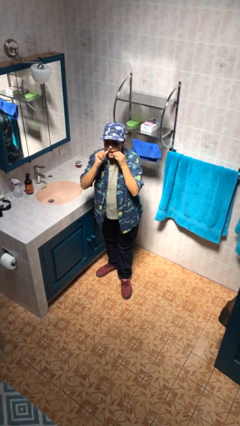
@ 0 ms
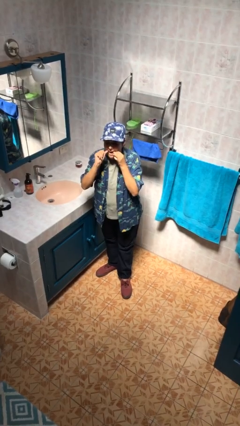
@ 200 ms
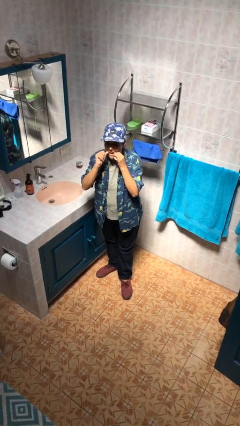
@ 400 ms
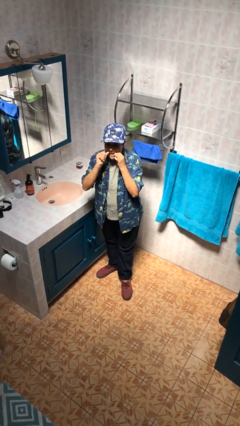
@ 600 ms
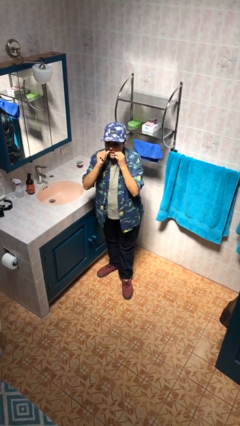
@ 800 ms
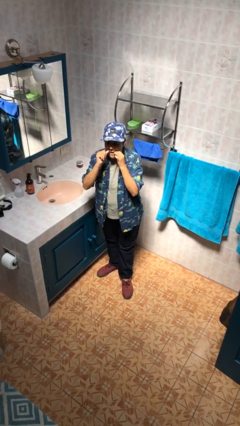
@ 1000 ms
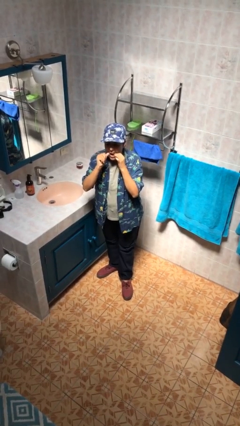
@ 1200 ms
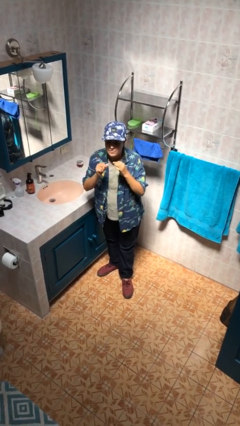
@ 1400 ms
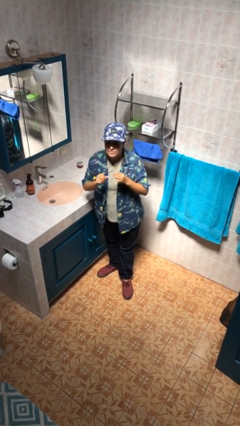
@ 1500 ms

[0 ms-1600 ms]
person flosses

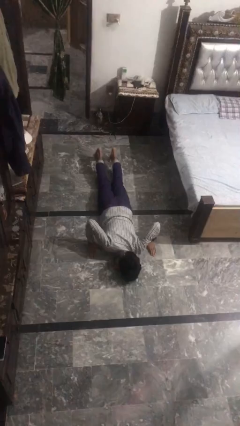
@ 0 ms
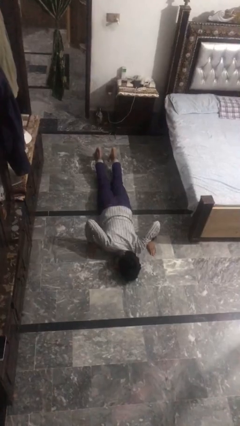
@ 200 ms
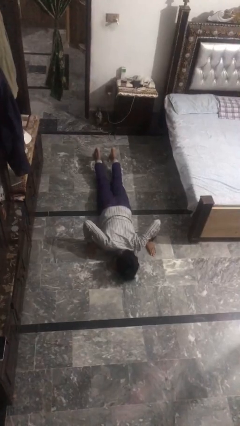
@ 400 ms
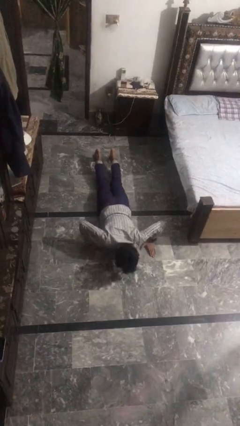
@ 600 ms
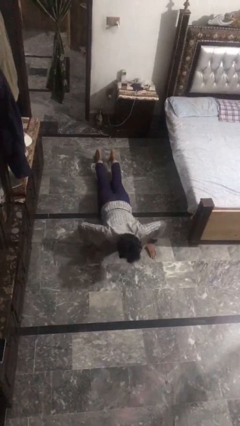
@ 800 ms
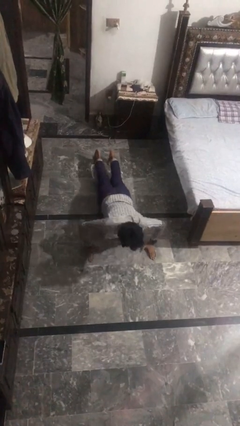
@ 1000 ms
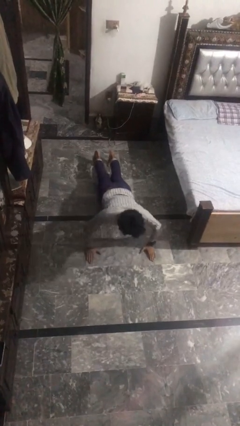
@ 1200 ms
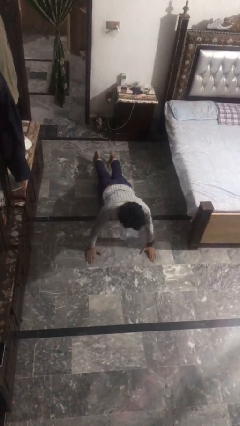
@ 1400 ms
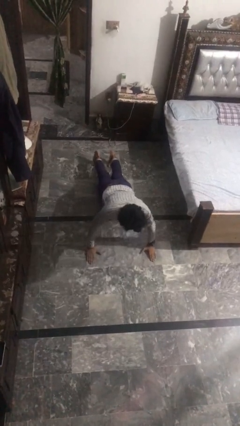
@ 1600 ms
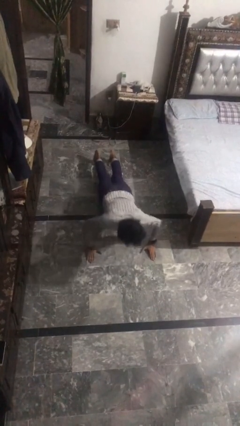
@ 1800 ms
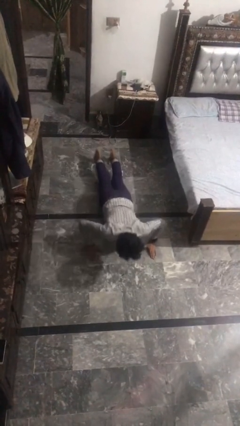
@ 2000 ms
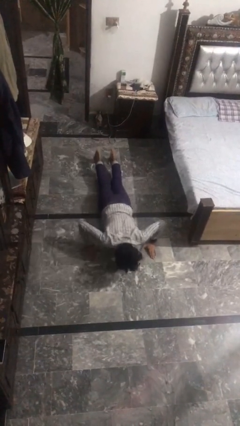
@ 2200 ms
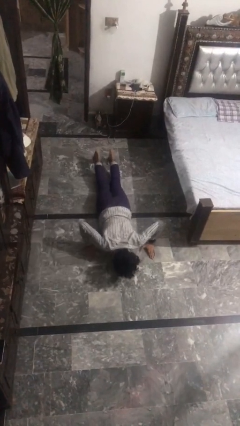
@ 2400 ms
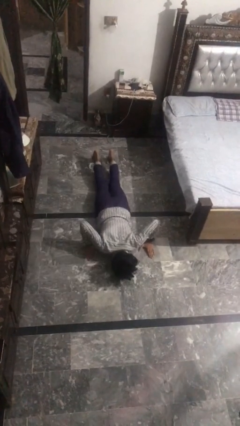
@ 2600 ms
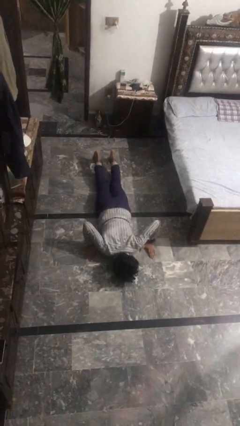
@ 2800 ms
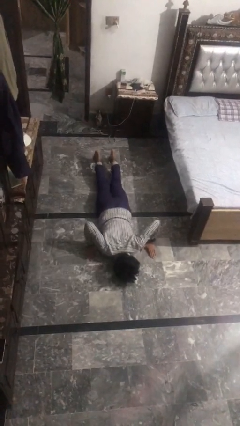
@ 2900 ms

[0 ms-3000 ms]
person exercises with pushup

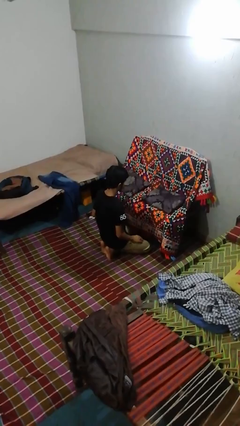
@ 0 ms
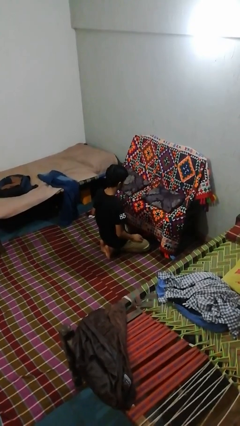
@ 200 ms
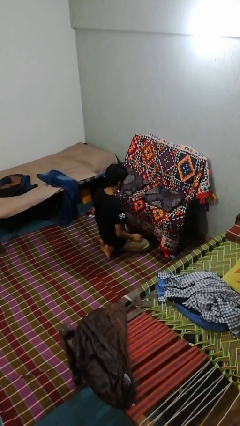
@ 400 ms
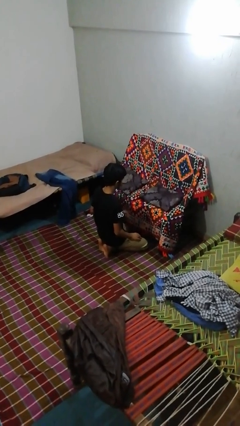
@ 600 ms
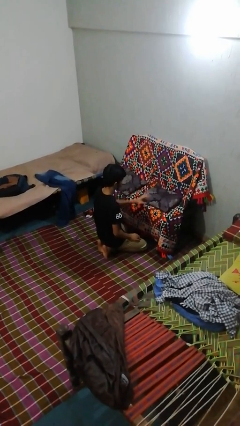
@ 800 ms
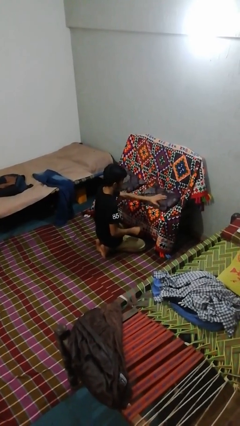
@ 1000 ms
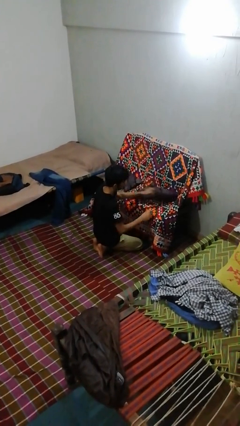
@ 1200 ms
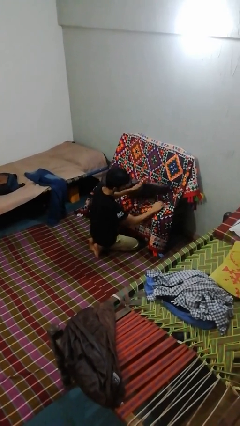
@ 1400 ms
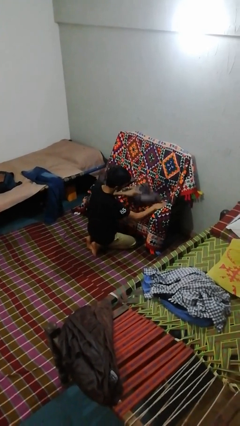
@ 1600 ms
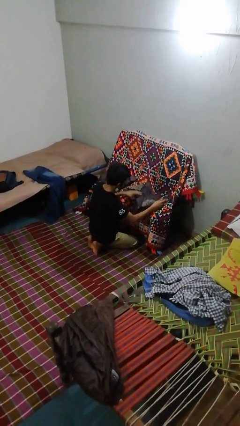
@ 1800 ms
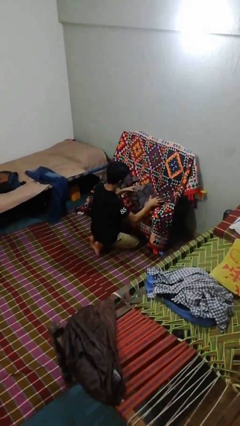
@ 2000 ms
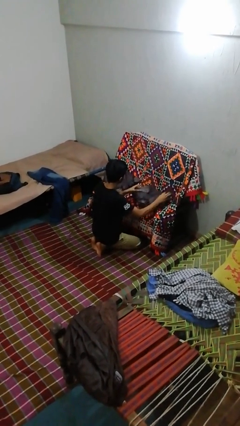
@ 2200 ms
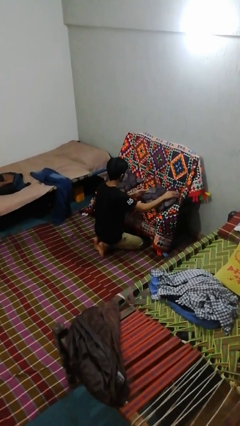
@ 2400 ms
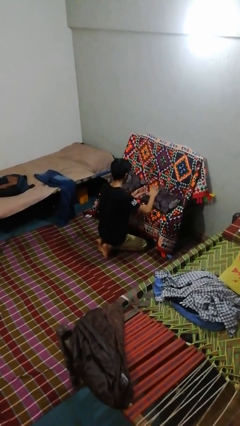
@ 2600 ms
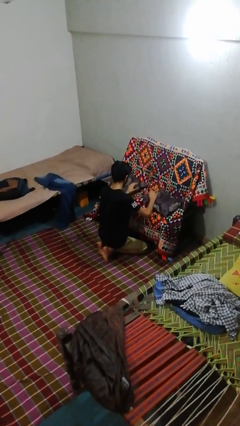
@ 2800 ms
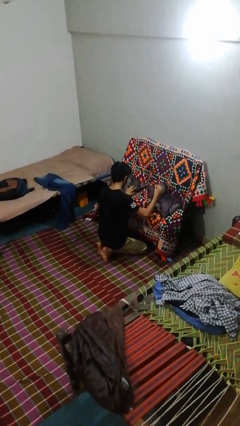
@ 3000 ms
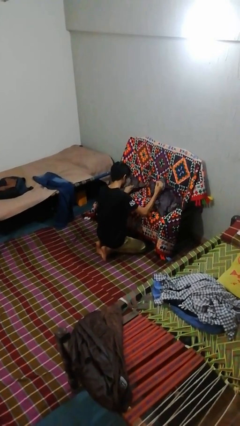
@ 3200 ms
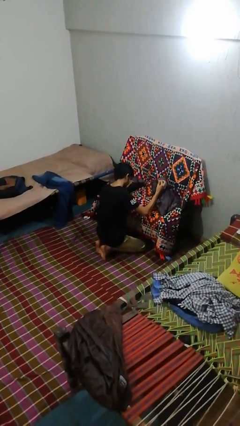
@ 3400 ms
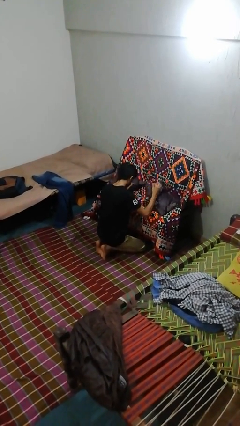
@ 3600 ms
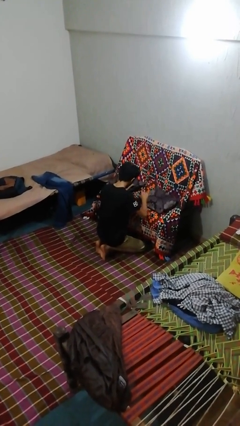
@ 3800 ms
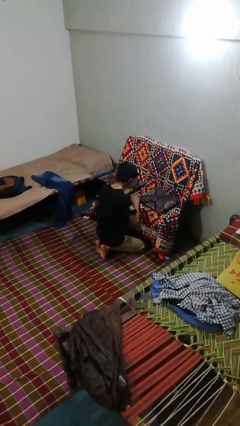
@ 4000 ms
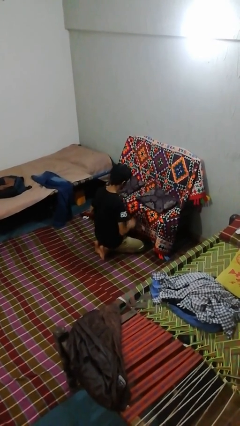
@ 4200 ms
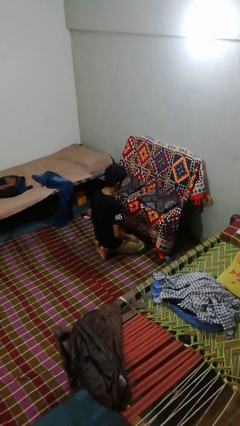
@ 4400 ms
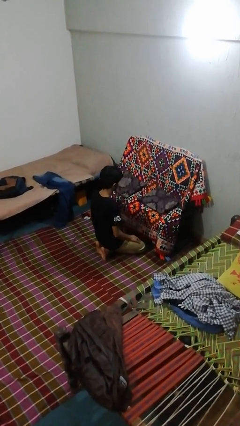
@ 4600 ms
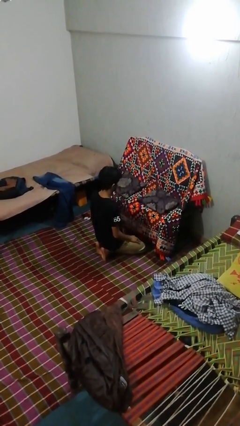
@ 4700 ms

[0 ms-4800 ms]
person searches in couch

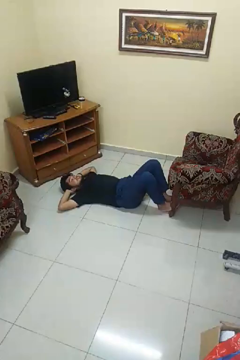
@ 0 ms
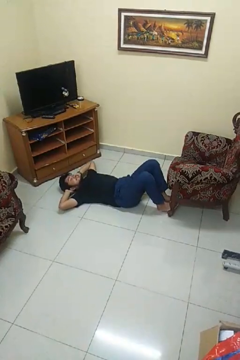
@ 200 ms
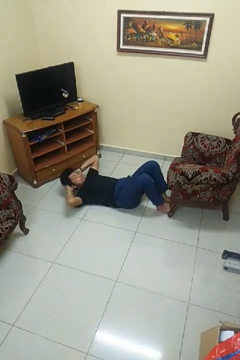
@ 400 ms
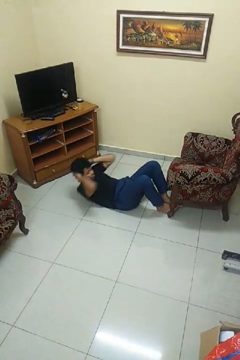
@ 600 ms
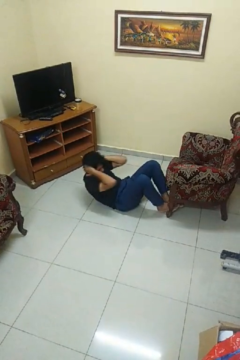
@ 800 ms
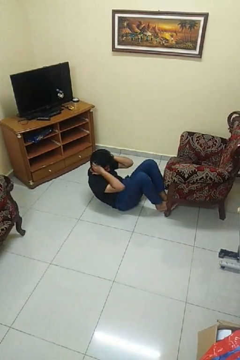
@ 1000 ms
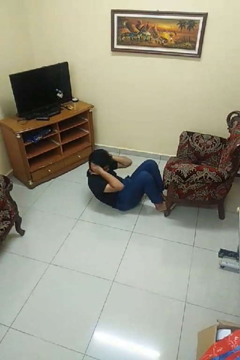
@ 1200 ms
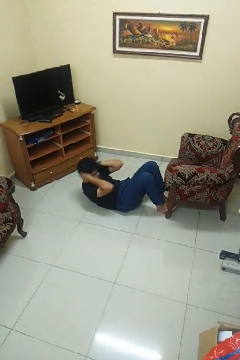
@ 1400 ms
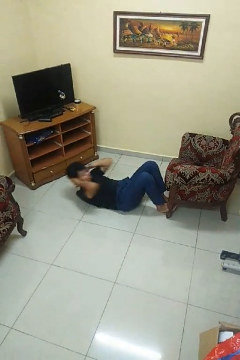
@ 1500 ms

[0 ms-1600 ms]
person exercises with situp

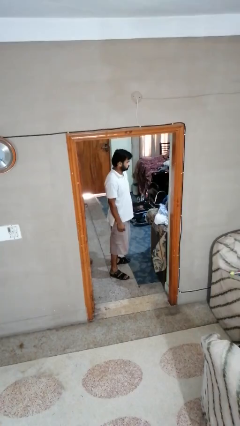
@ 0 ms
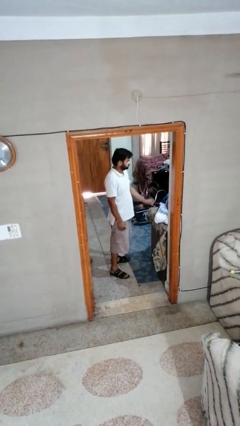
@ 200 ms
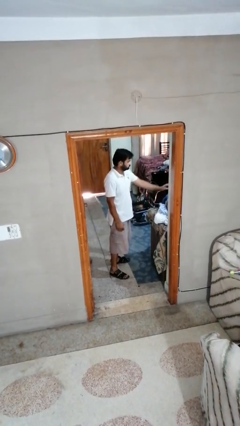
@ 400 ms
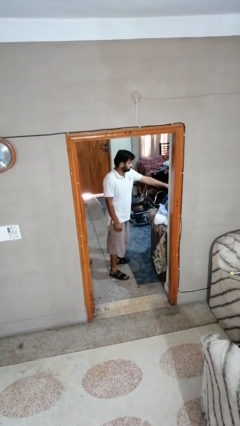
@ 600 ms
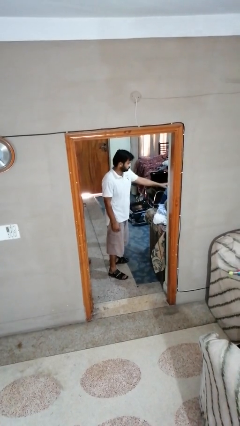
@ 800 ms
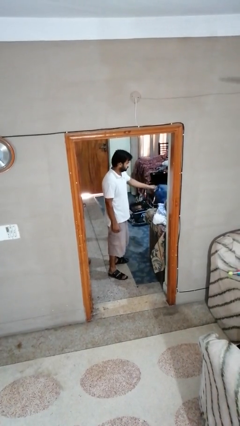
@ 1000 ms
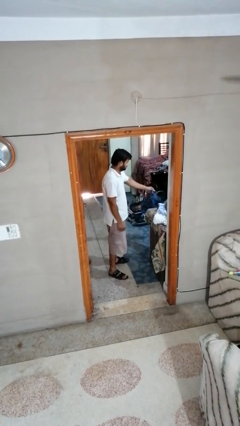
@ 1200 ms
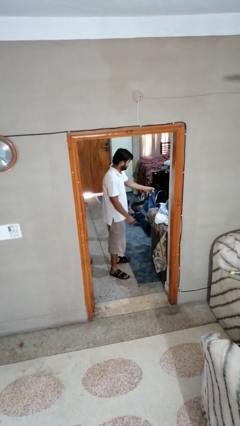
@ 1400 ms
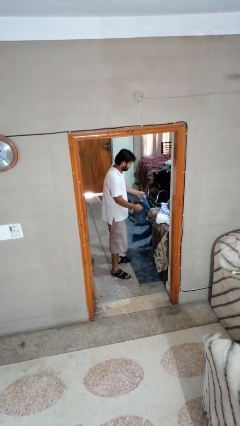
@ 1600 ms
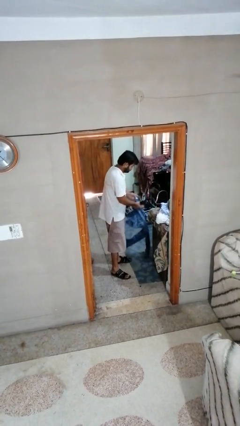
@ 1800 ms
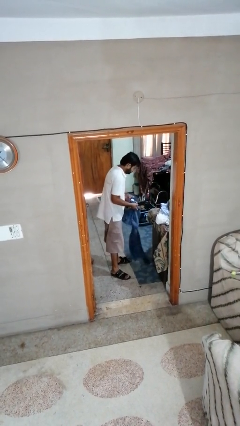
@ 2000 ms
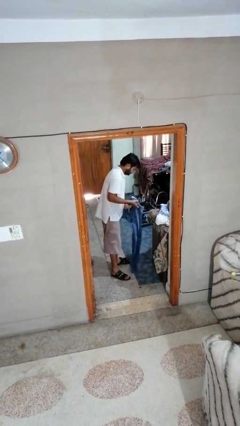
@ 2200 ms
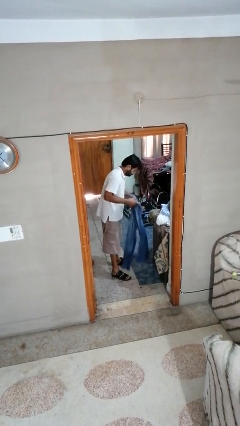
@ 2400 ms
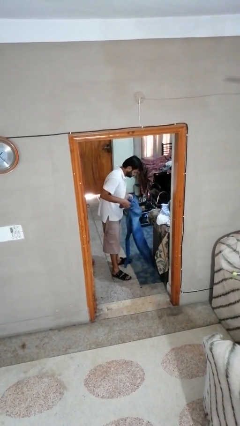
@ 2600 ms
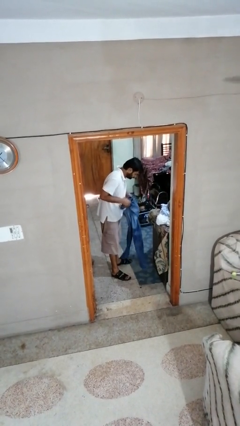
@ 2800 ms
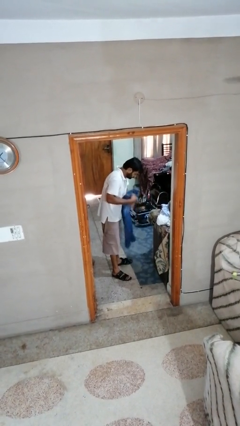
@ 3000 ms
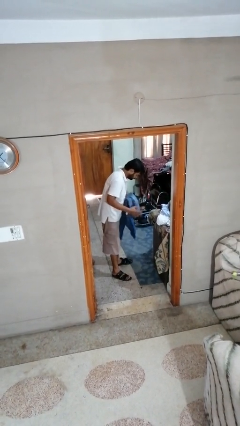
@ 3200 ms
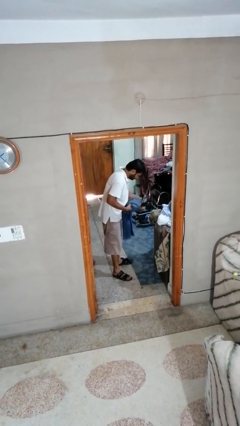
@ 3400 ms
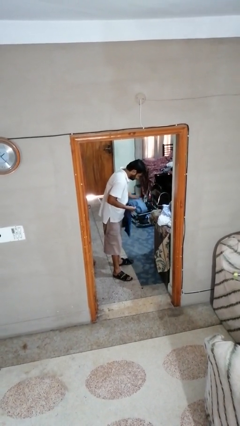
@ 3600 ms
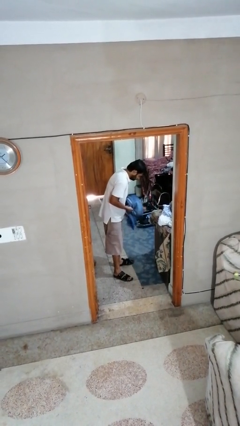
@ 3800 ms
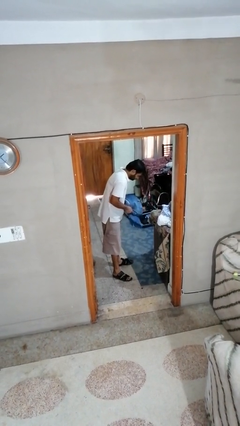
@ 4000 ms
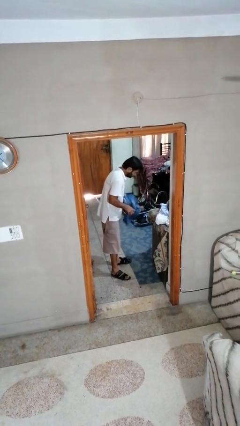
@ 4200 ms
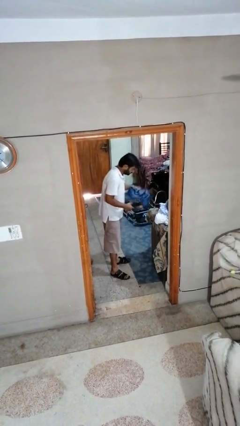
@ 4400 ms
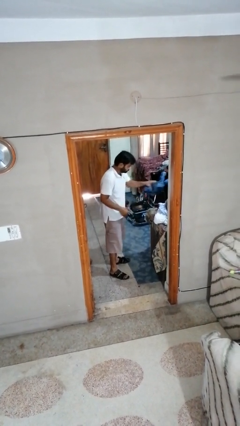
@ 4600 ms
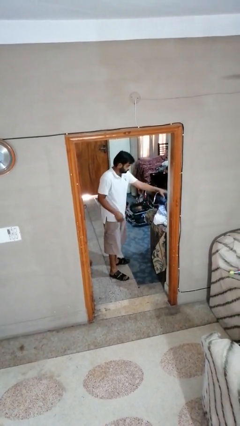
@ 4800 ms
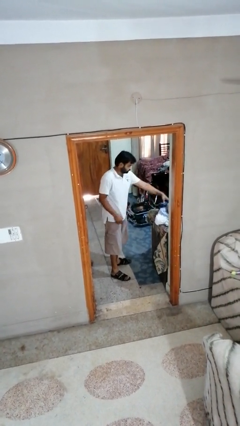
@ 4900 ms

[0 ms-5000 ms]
person folds pants

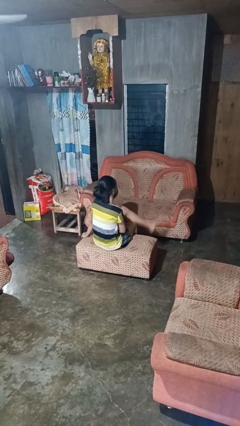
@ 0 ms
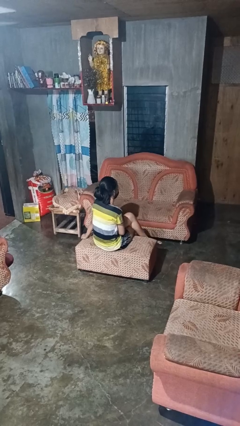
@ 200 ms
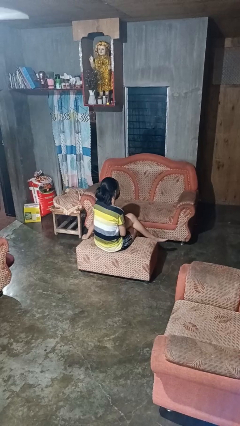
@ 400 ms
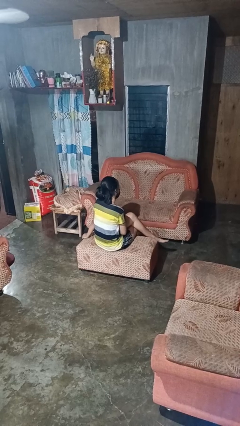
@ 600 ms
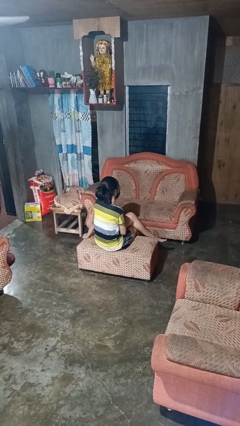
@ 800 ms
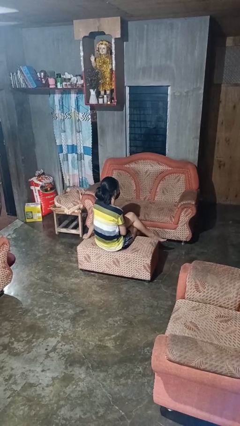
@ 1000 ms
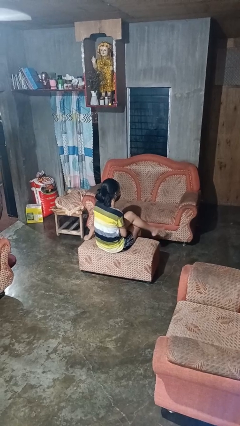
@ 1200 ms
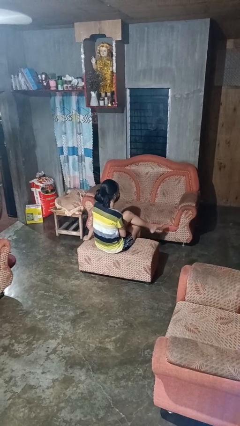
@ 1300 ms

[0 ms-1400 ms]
person crosses legs
